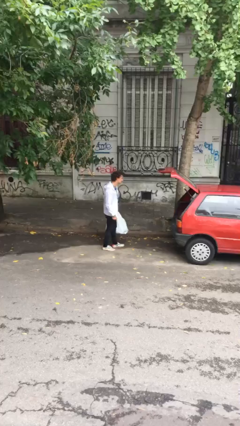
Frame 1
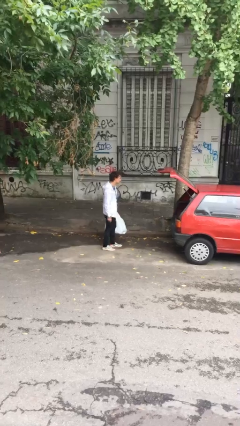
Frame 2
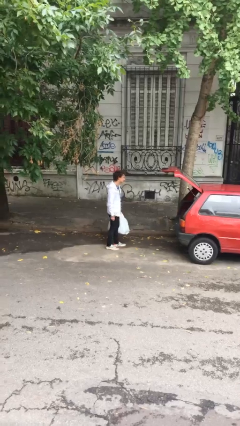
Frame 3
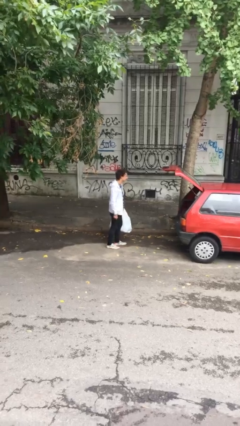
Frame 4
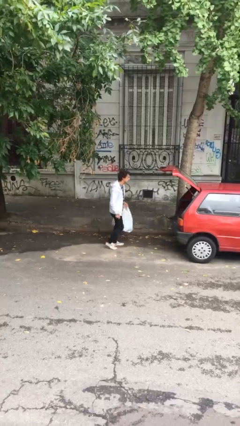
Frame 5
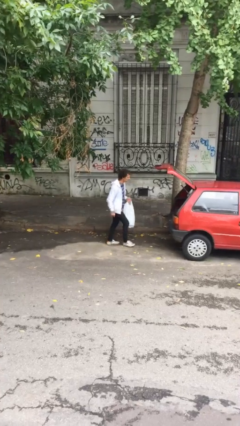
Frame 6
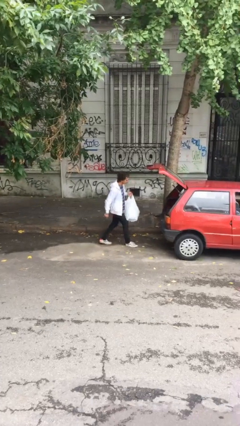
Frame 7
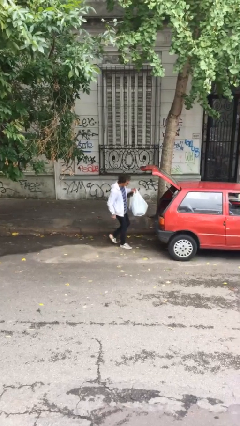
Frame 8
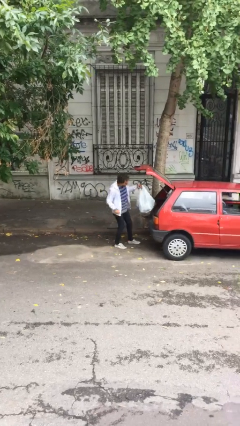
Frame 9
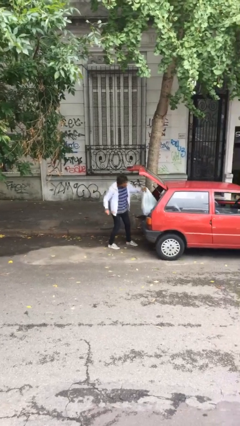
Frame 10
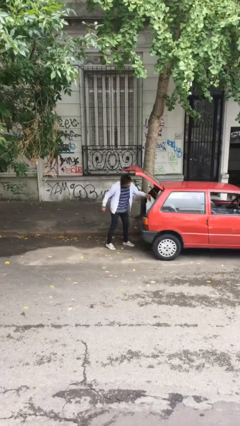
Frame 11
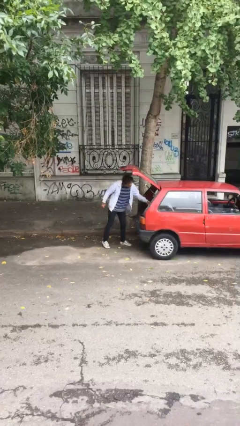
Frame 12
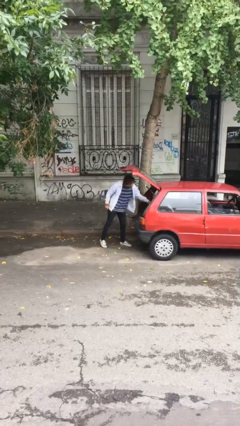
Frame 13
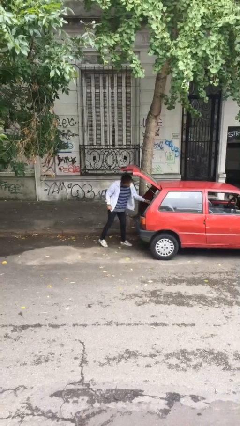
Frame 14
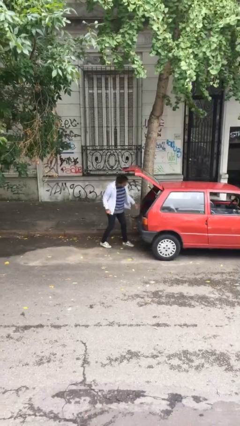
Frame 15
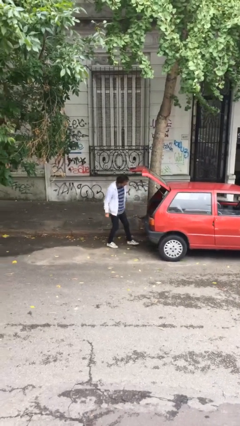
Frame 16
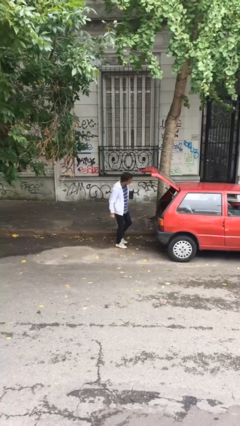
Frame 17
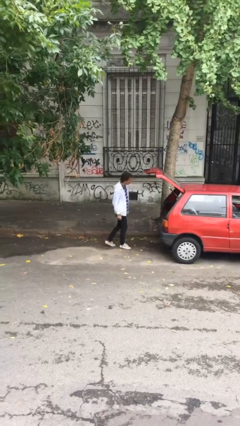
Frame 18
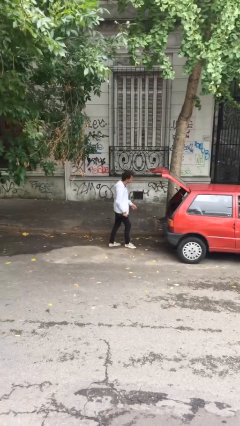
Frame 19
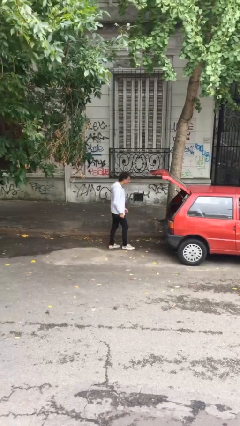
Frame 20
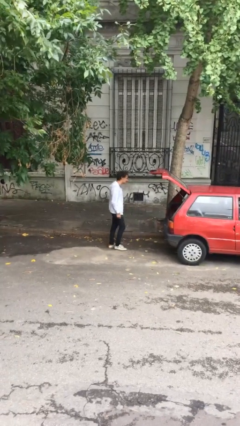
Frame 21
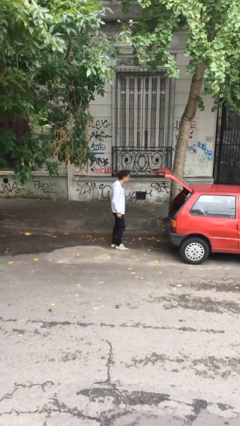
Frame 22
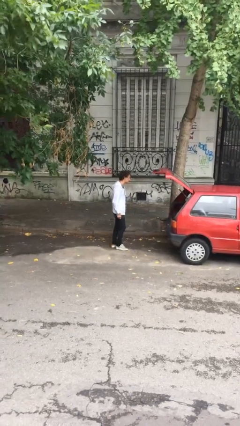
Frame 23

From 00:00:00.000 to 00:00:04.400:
person loads car

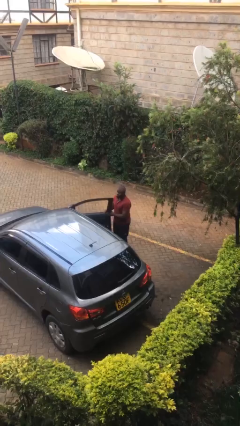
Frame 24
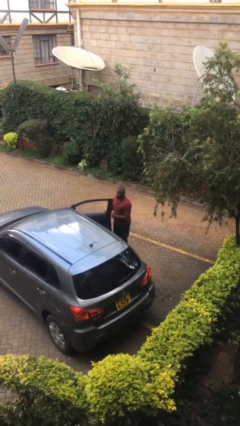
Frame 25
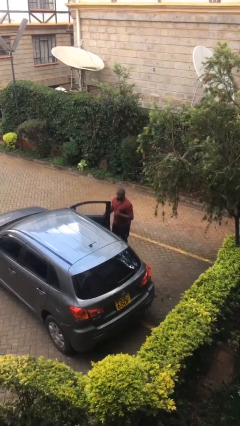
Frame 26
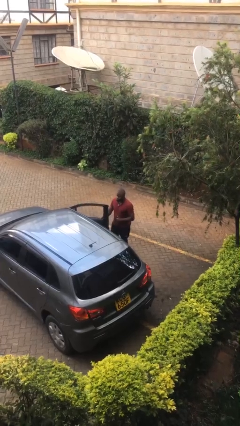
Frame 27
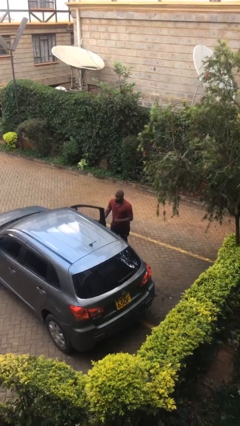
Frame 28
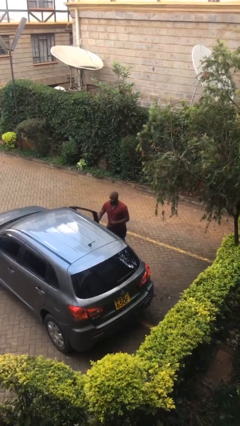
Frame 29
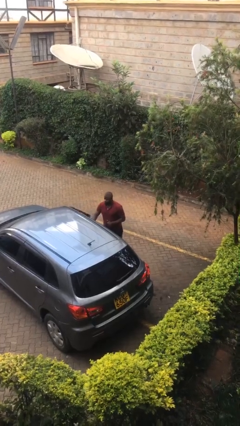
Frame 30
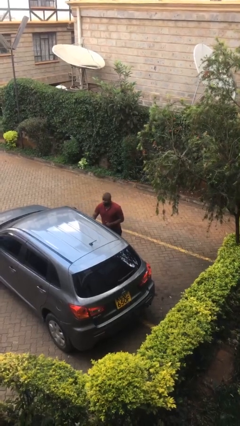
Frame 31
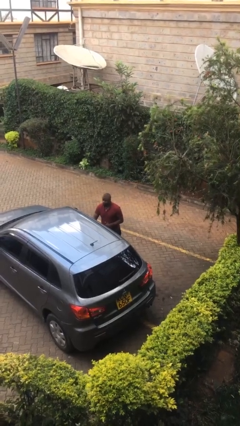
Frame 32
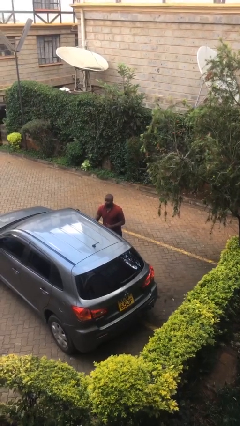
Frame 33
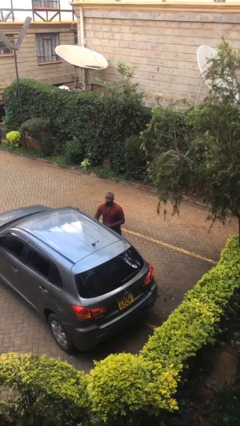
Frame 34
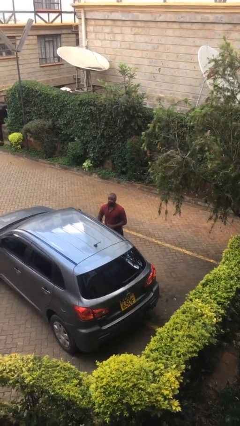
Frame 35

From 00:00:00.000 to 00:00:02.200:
person closes car door

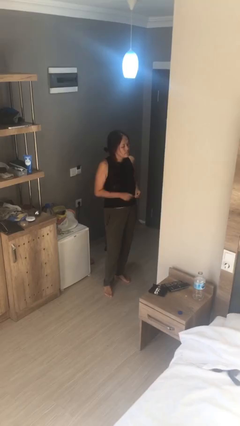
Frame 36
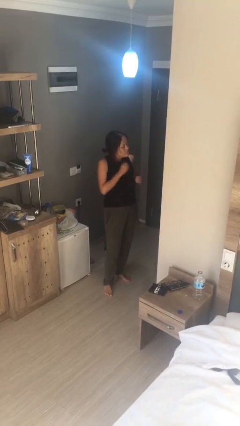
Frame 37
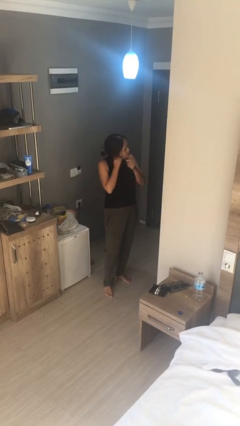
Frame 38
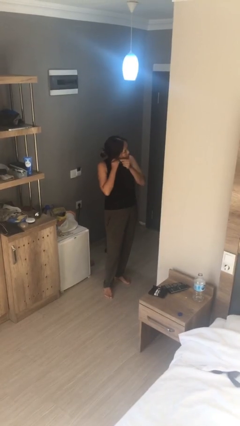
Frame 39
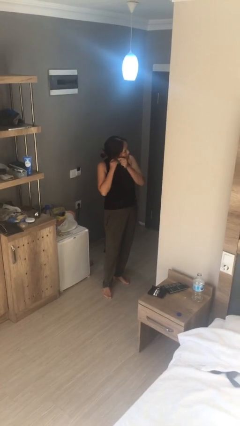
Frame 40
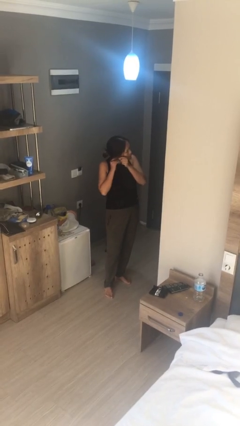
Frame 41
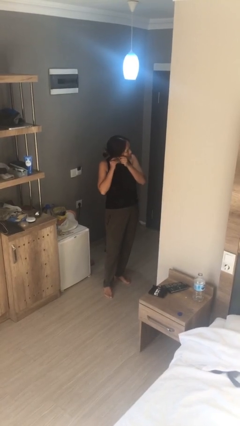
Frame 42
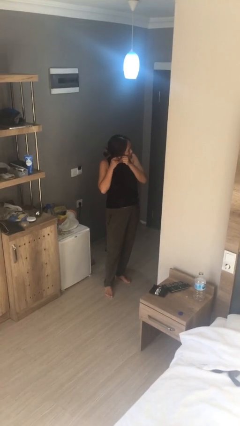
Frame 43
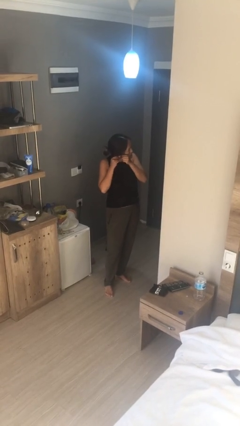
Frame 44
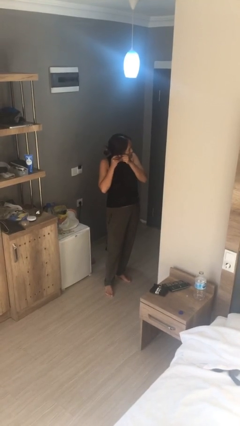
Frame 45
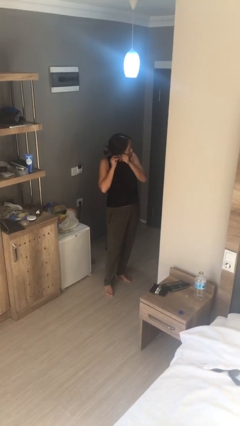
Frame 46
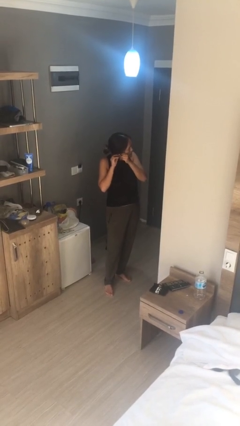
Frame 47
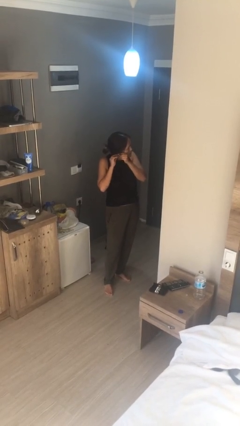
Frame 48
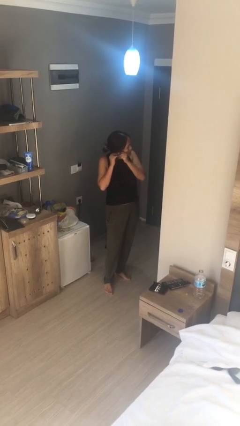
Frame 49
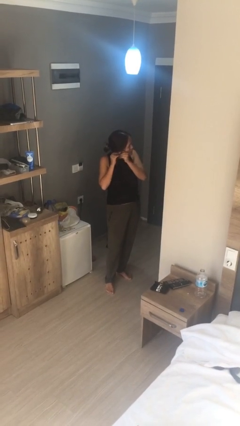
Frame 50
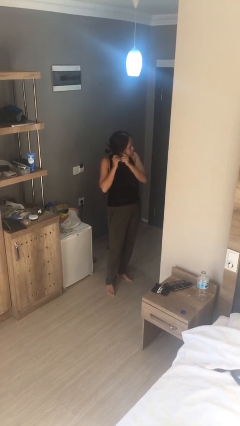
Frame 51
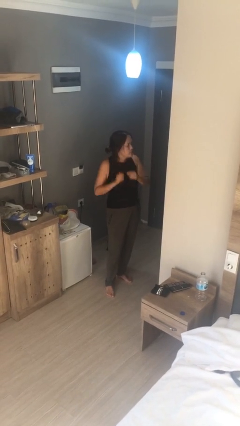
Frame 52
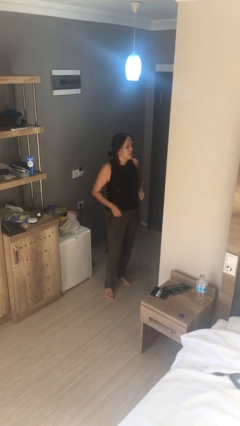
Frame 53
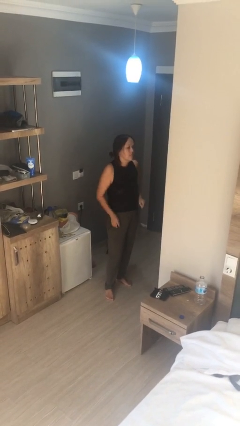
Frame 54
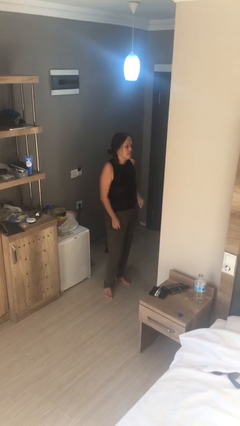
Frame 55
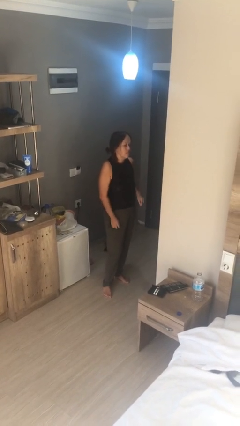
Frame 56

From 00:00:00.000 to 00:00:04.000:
person puts on earrings

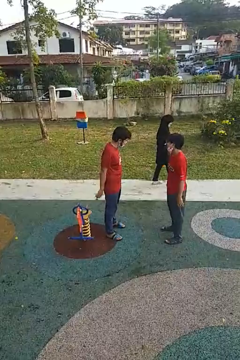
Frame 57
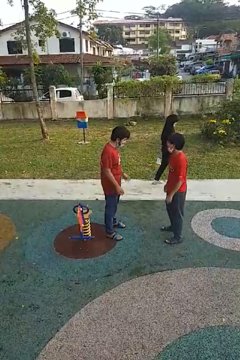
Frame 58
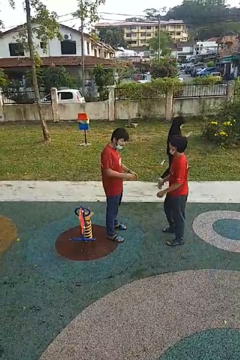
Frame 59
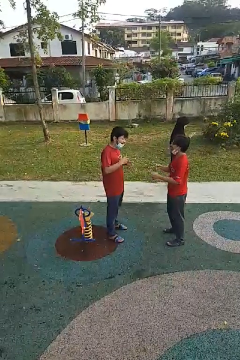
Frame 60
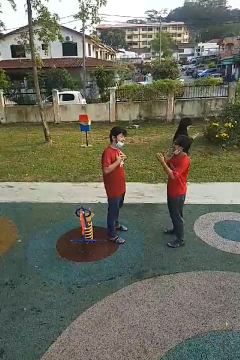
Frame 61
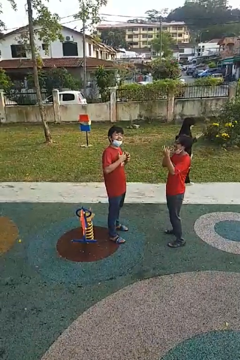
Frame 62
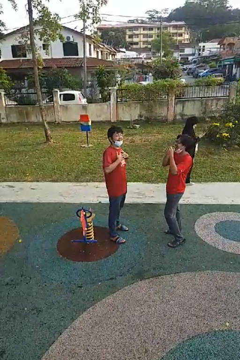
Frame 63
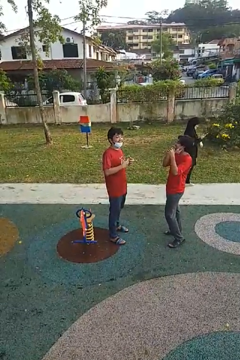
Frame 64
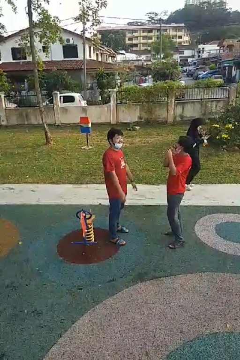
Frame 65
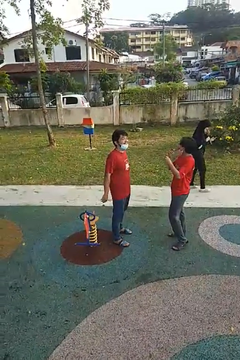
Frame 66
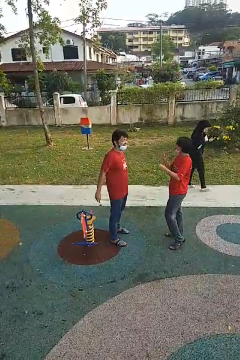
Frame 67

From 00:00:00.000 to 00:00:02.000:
person laughs with person

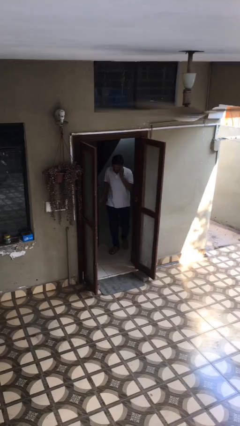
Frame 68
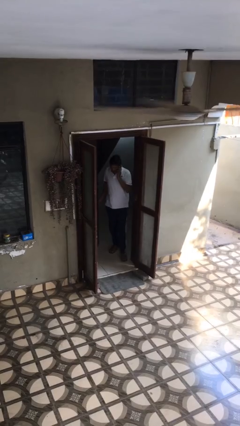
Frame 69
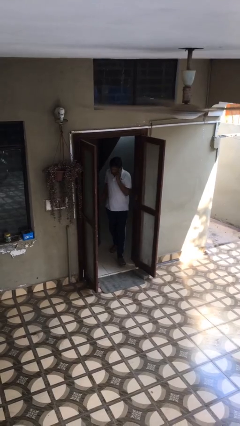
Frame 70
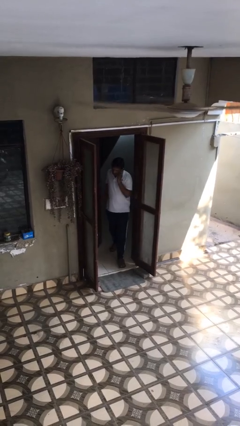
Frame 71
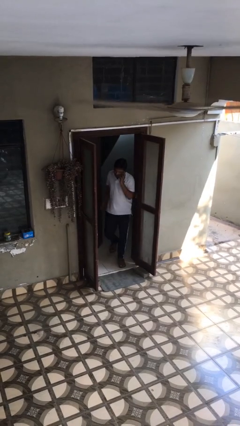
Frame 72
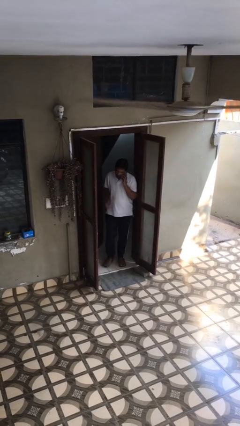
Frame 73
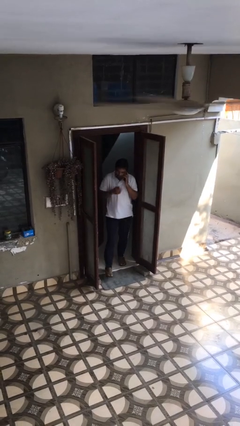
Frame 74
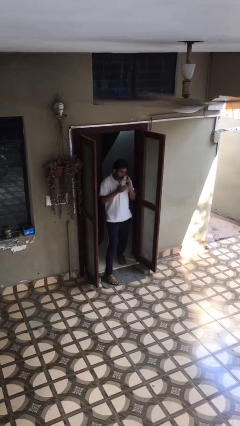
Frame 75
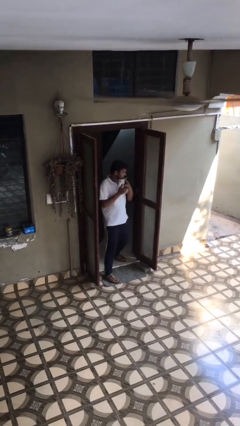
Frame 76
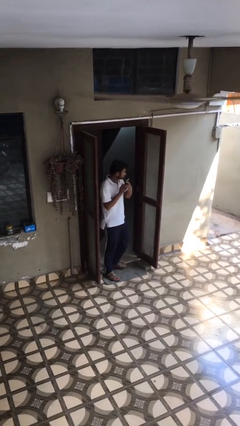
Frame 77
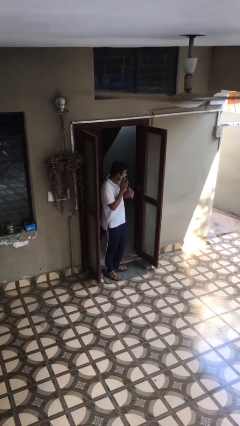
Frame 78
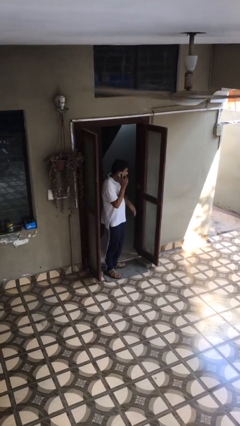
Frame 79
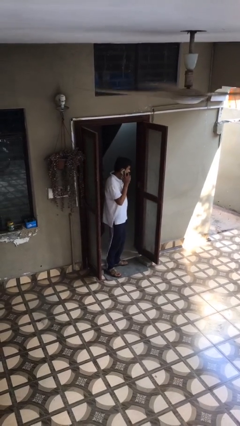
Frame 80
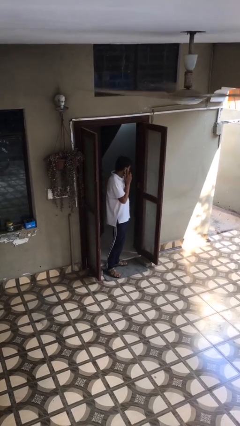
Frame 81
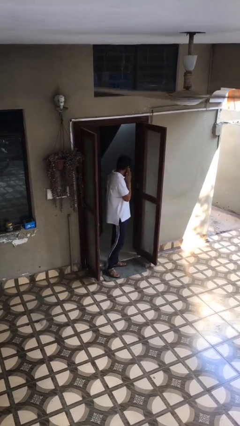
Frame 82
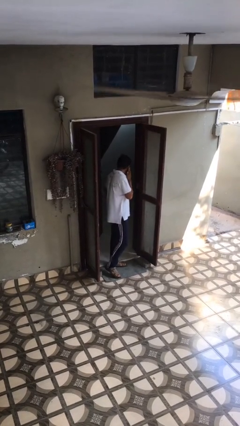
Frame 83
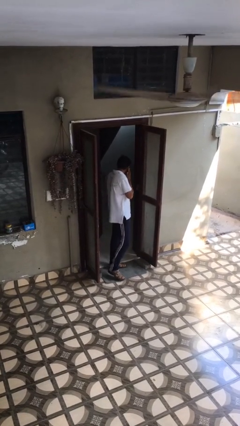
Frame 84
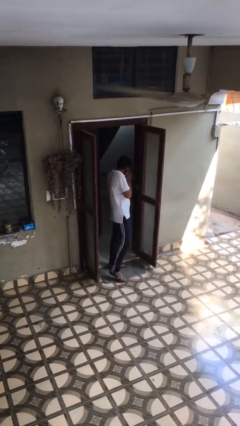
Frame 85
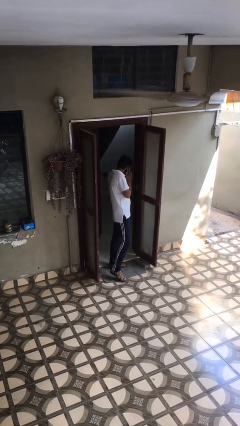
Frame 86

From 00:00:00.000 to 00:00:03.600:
person enters scene through structure

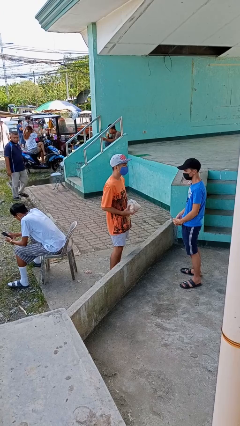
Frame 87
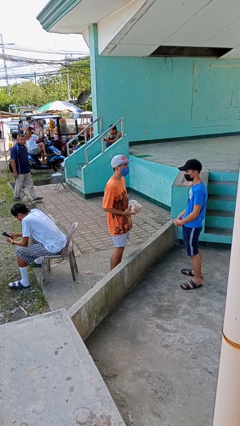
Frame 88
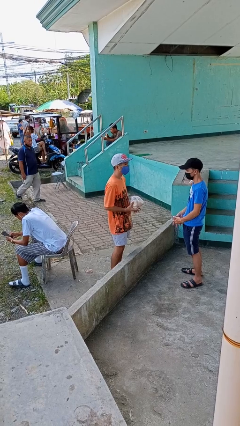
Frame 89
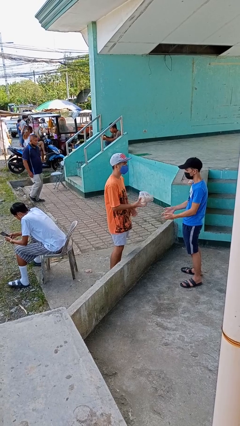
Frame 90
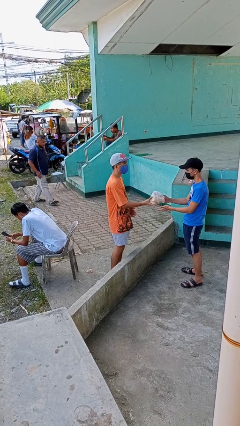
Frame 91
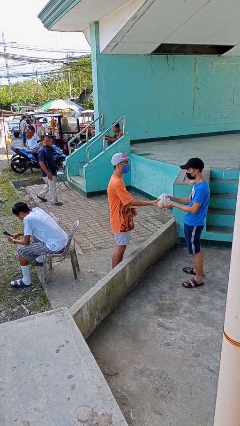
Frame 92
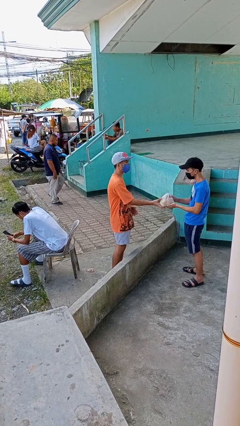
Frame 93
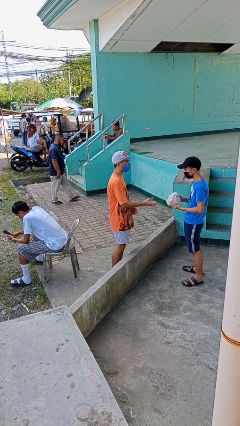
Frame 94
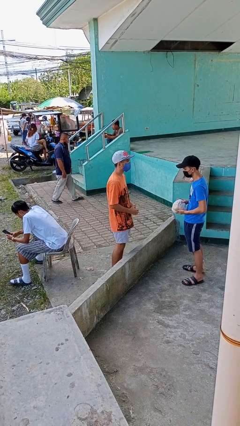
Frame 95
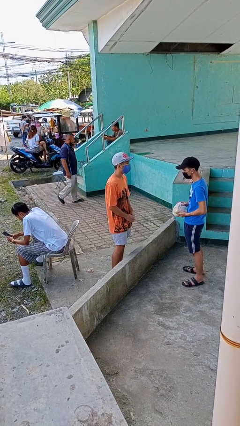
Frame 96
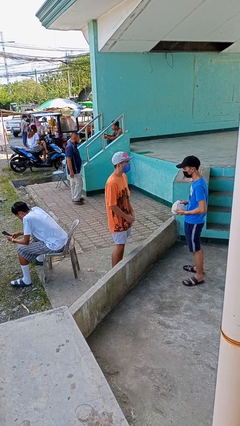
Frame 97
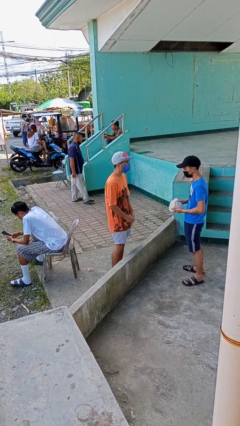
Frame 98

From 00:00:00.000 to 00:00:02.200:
person transfers object to person
